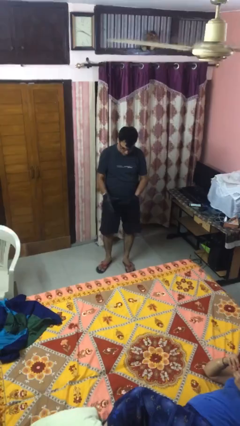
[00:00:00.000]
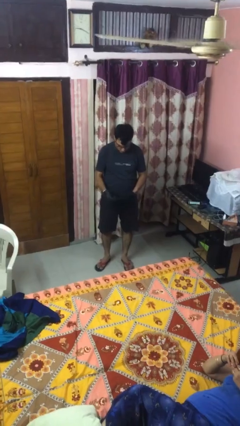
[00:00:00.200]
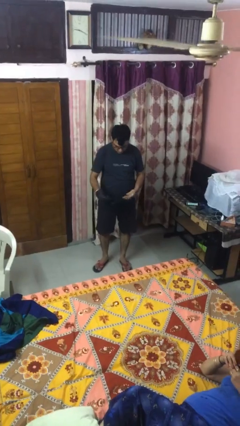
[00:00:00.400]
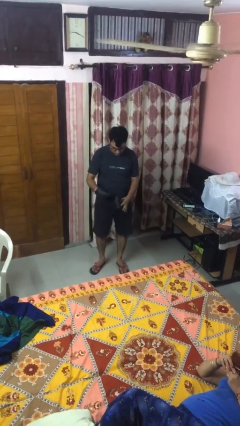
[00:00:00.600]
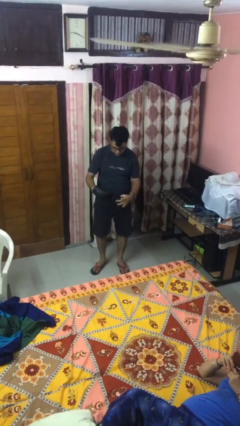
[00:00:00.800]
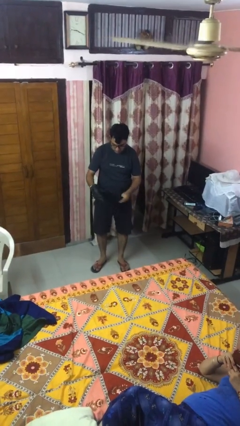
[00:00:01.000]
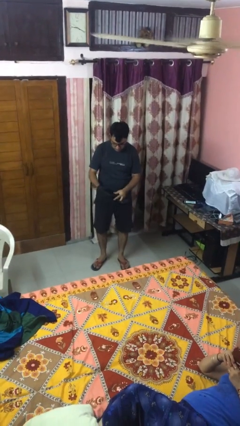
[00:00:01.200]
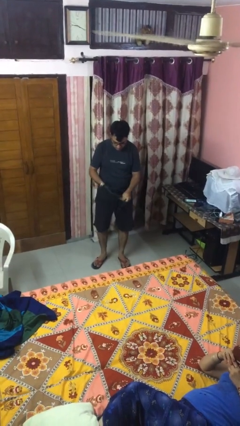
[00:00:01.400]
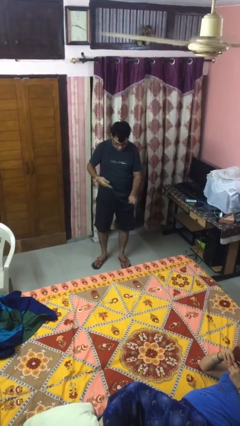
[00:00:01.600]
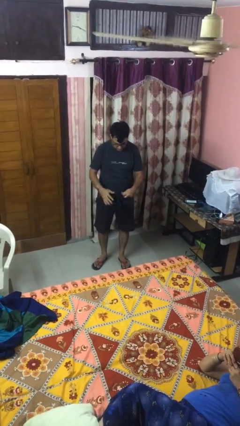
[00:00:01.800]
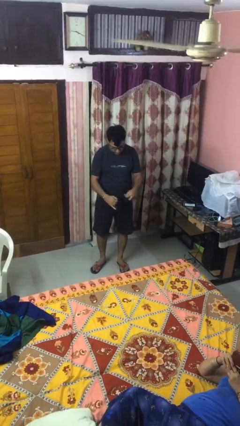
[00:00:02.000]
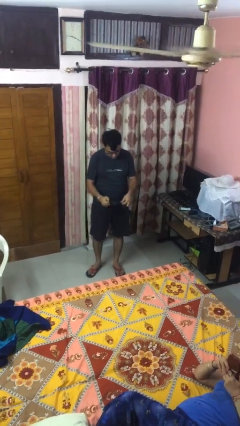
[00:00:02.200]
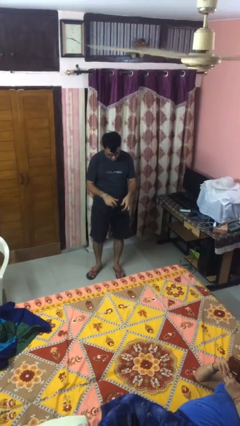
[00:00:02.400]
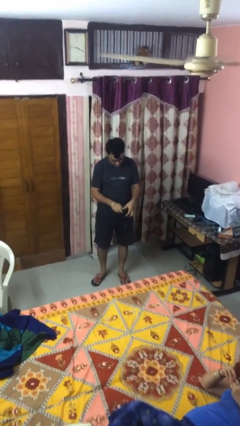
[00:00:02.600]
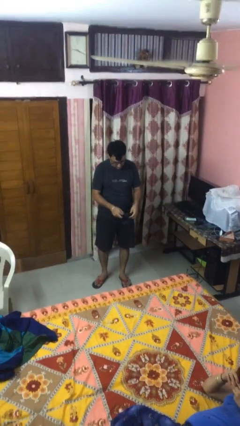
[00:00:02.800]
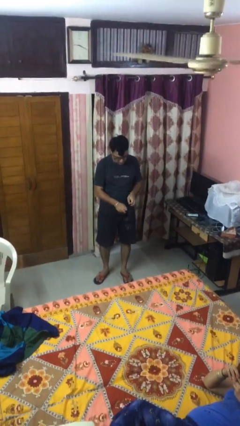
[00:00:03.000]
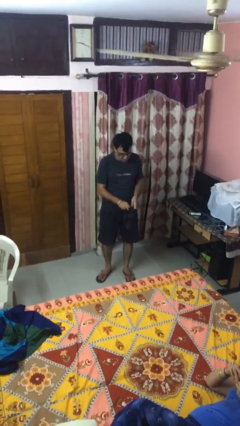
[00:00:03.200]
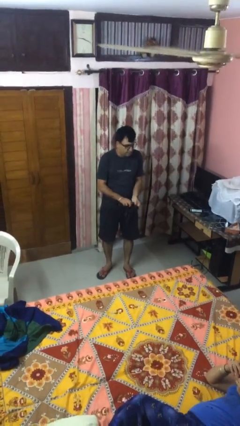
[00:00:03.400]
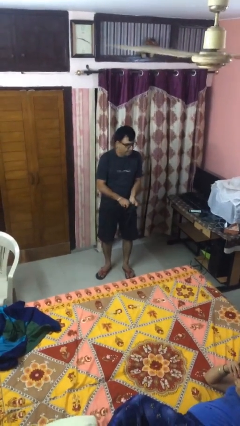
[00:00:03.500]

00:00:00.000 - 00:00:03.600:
person takes off gloves

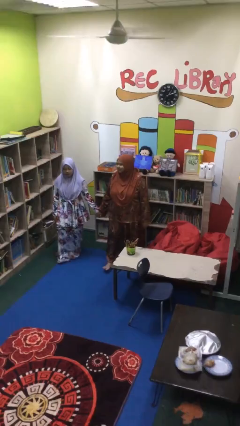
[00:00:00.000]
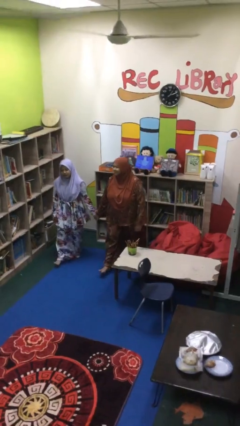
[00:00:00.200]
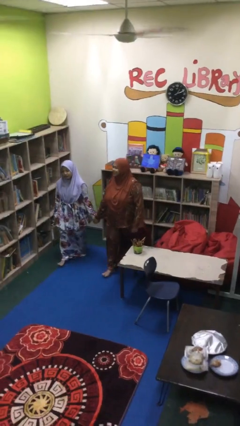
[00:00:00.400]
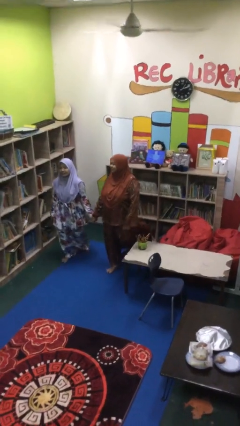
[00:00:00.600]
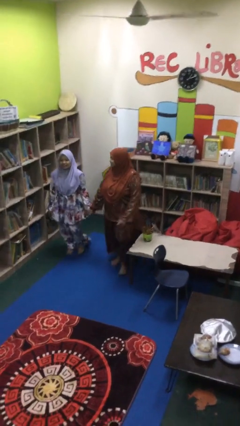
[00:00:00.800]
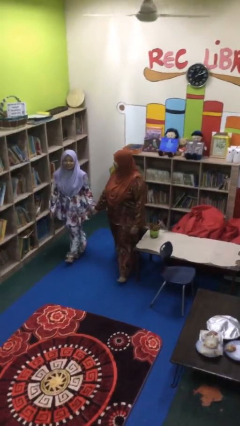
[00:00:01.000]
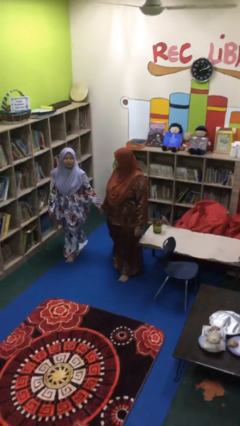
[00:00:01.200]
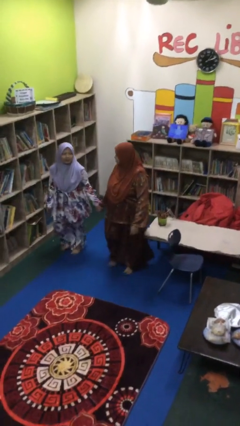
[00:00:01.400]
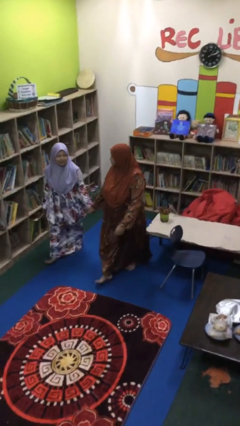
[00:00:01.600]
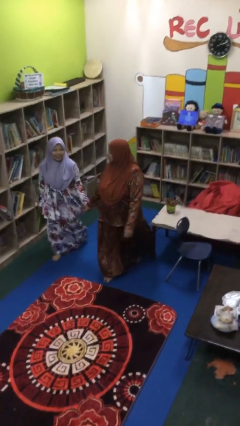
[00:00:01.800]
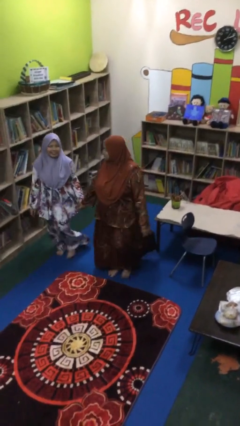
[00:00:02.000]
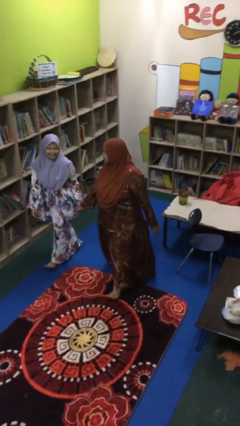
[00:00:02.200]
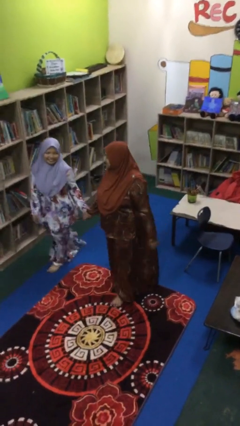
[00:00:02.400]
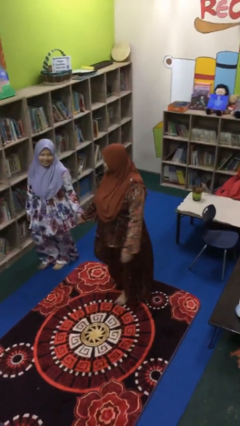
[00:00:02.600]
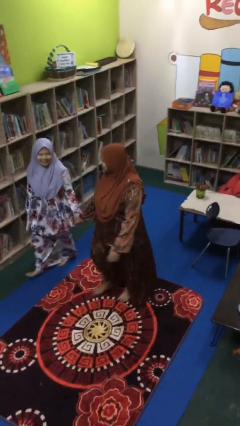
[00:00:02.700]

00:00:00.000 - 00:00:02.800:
person holds hand

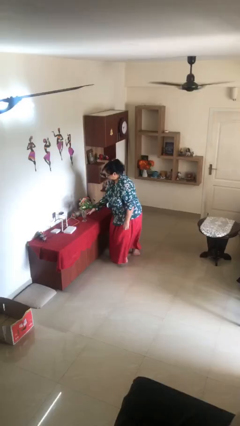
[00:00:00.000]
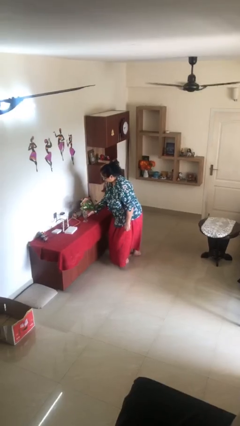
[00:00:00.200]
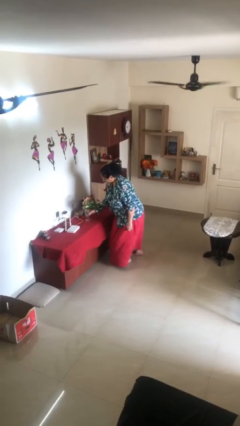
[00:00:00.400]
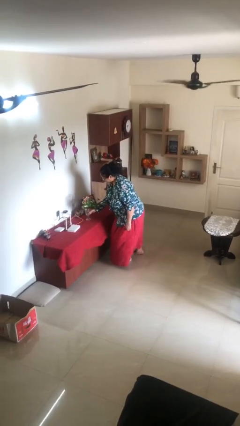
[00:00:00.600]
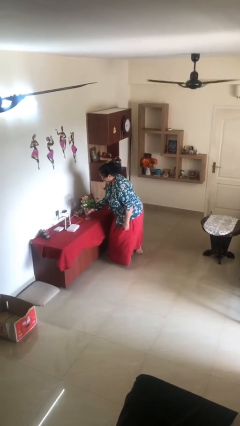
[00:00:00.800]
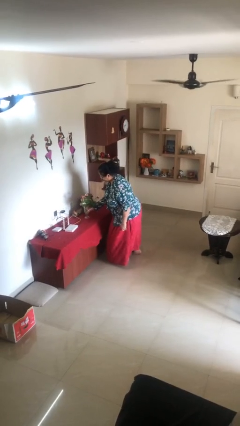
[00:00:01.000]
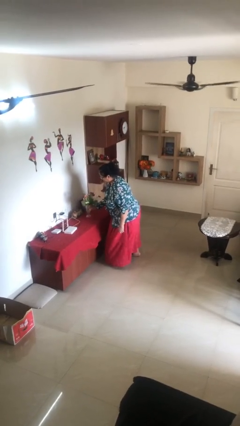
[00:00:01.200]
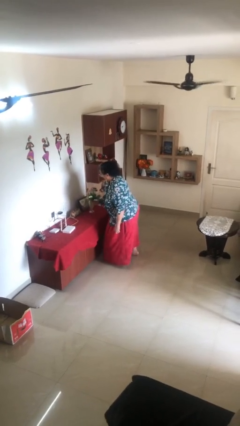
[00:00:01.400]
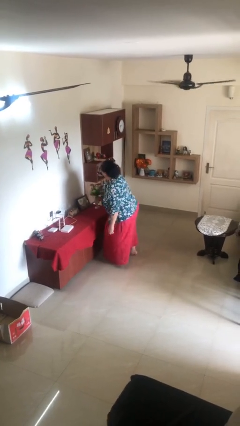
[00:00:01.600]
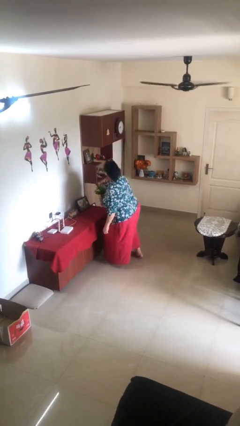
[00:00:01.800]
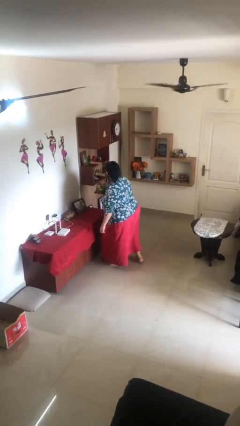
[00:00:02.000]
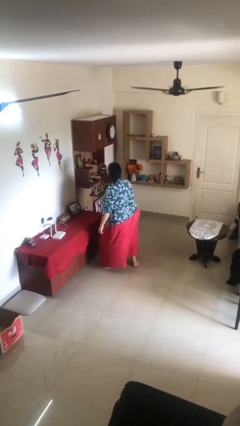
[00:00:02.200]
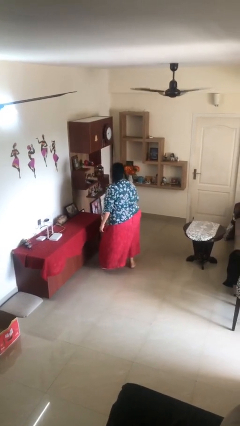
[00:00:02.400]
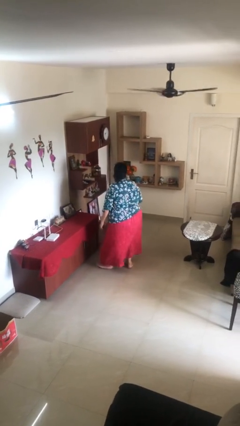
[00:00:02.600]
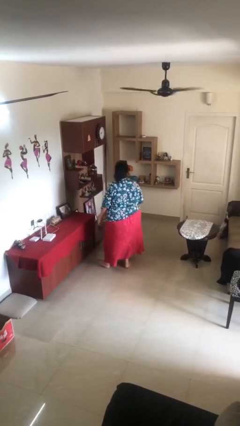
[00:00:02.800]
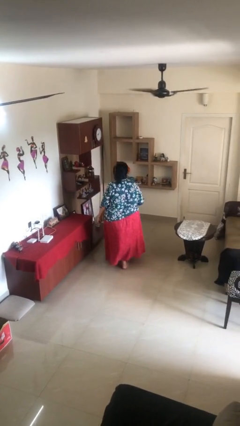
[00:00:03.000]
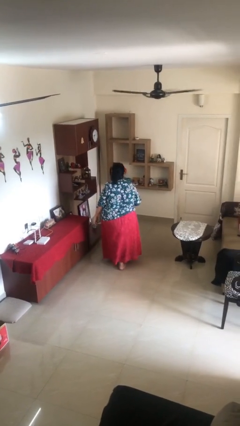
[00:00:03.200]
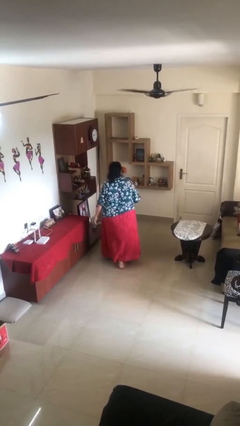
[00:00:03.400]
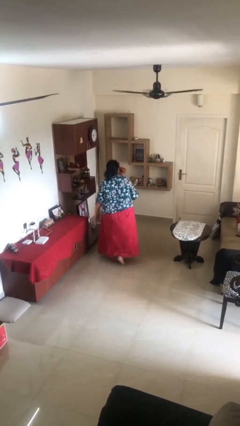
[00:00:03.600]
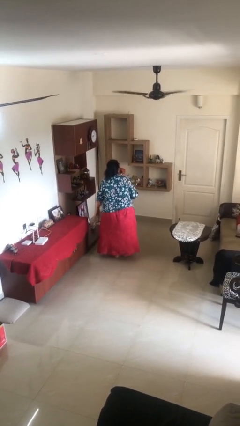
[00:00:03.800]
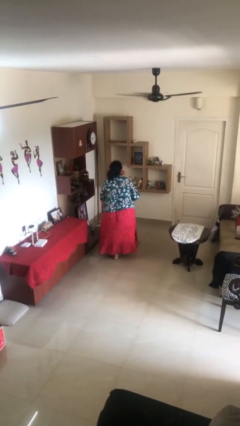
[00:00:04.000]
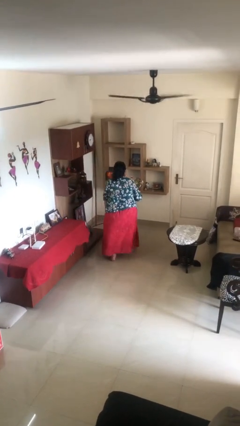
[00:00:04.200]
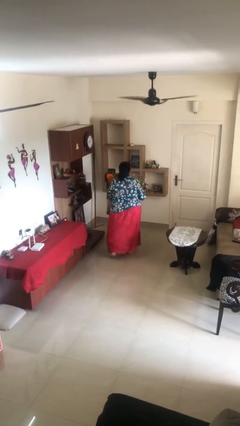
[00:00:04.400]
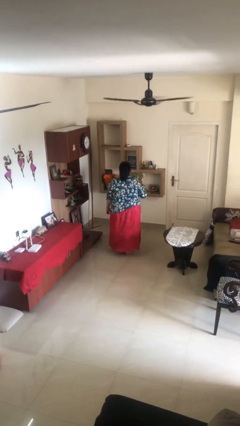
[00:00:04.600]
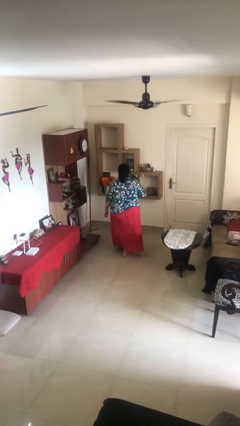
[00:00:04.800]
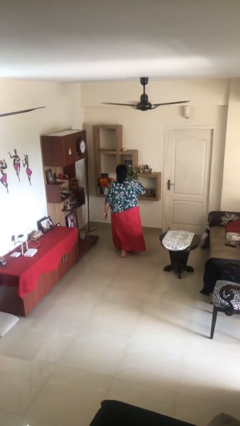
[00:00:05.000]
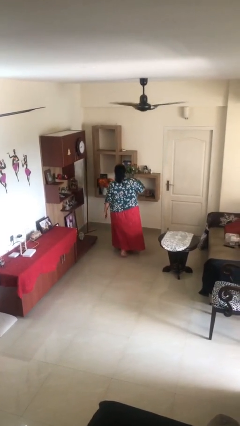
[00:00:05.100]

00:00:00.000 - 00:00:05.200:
person picks up object from table

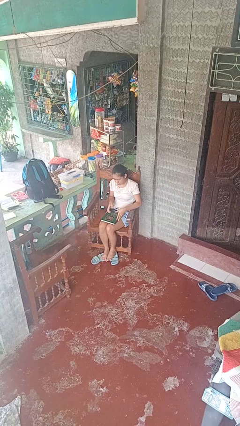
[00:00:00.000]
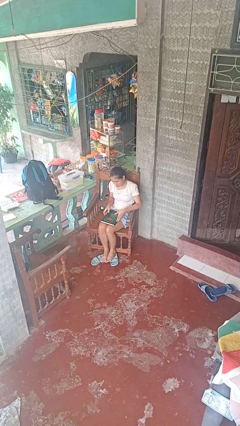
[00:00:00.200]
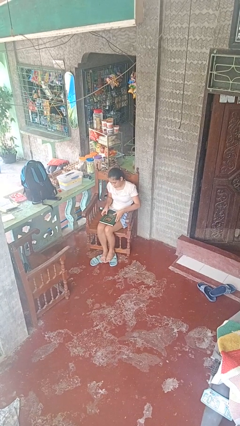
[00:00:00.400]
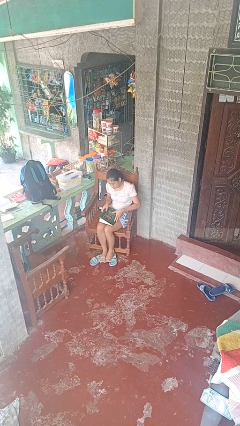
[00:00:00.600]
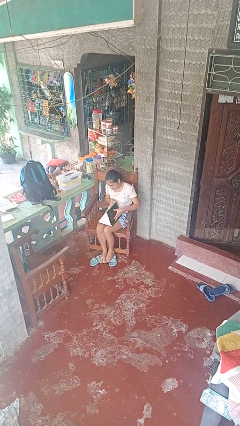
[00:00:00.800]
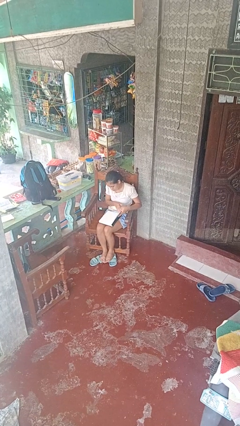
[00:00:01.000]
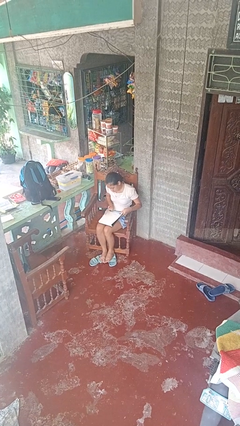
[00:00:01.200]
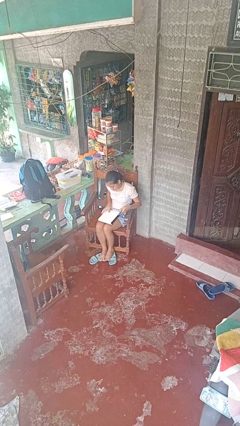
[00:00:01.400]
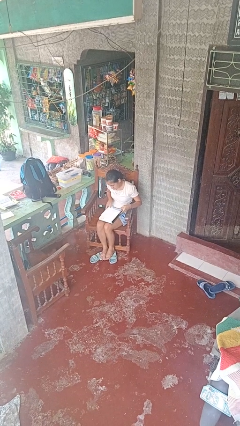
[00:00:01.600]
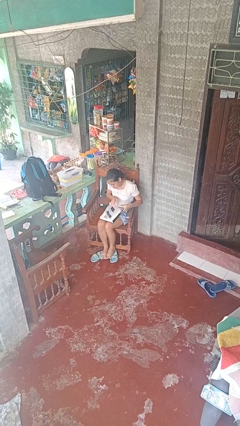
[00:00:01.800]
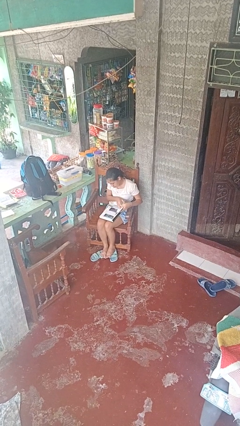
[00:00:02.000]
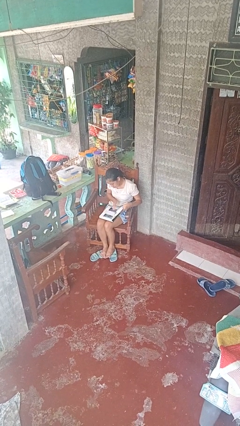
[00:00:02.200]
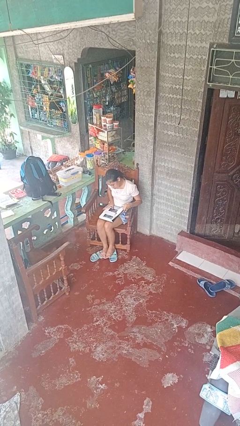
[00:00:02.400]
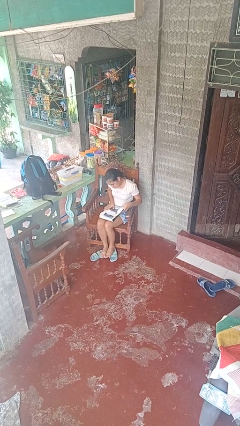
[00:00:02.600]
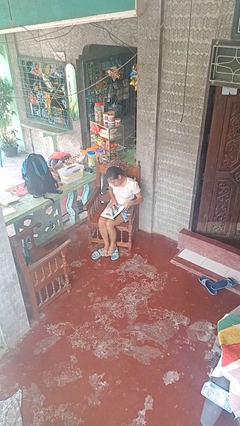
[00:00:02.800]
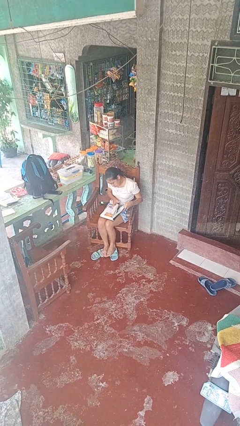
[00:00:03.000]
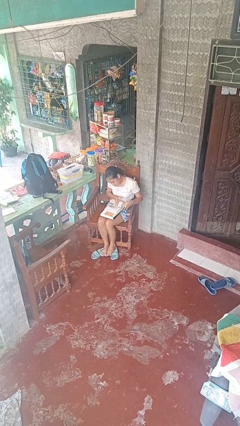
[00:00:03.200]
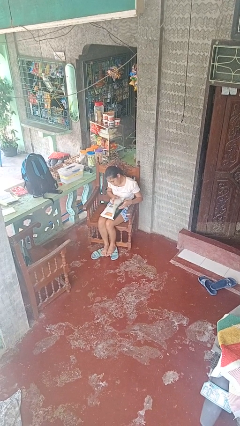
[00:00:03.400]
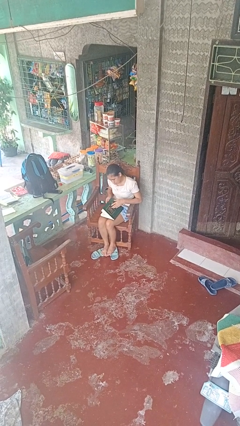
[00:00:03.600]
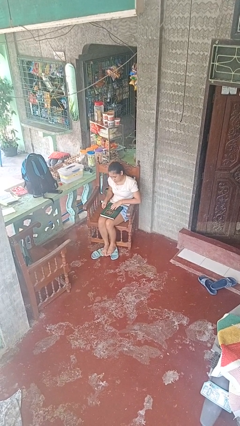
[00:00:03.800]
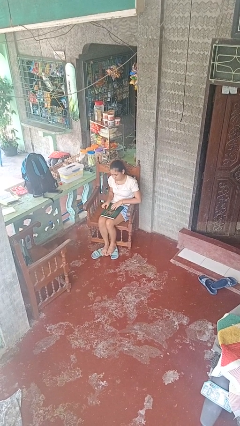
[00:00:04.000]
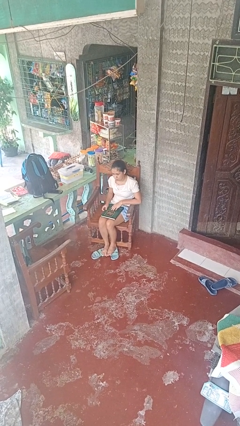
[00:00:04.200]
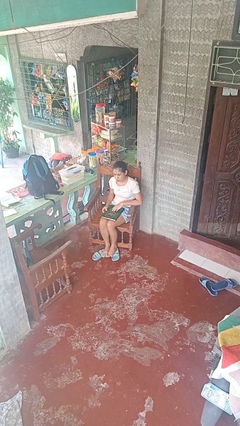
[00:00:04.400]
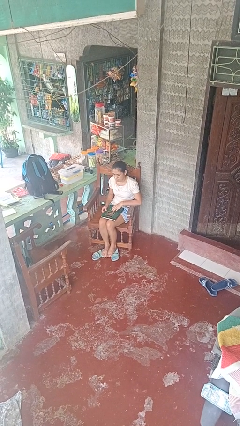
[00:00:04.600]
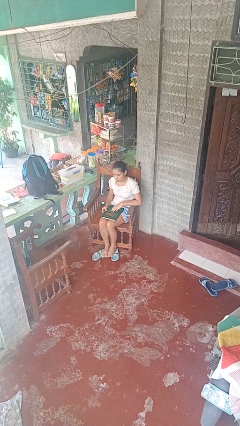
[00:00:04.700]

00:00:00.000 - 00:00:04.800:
person reads book

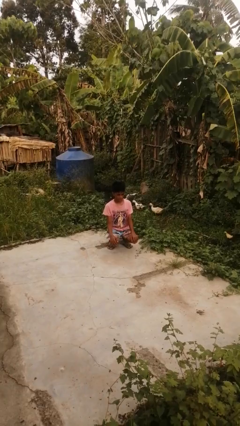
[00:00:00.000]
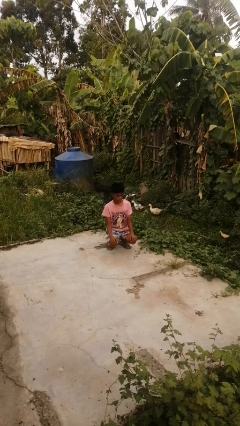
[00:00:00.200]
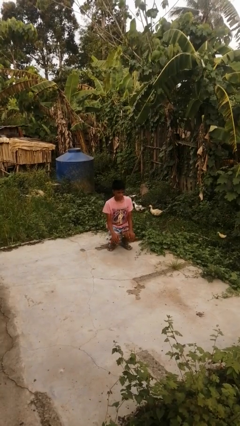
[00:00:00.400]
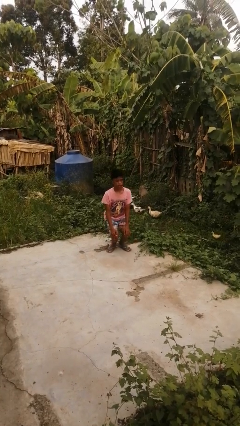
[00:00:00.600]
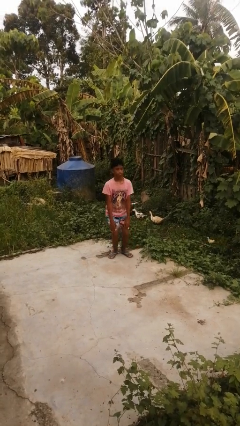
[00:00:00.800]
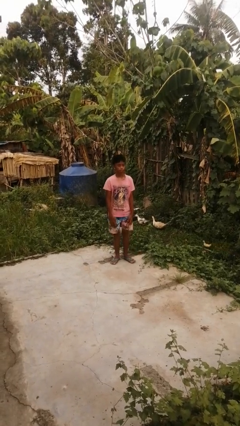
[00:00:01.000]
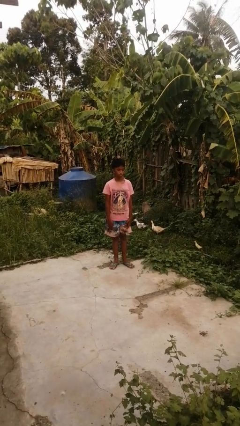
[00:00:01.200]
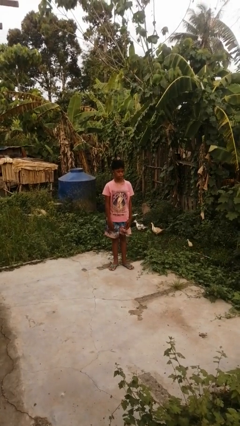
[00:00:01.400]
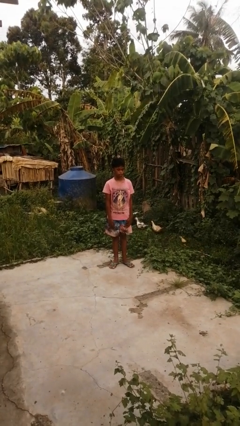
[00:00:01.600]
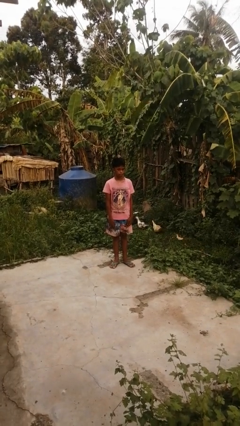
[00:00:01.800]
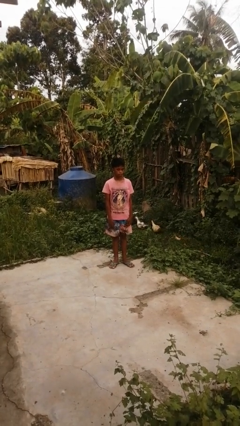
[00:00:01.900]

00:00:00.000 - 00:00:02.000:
person stands up
